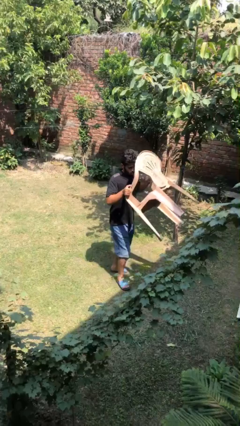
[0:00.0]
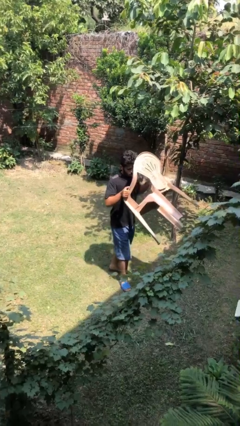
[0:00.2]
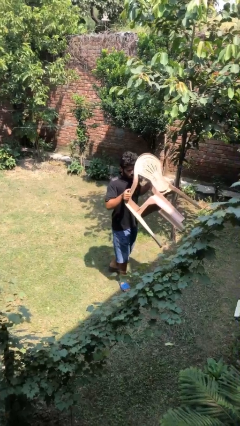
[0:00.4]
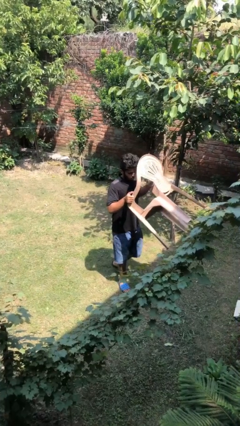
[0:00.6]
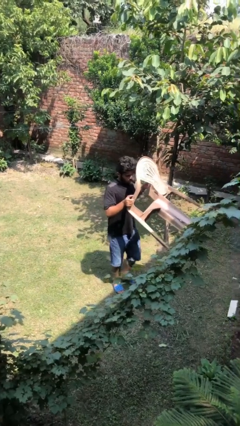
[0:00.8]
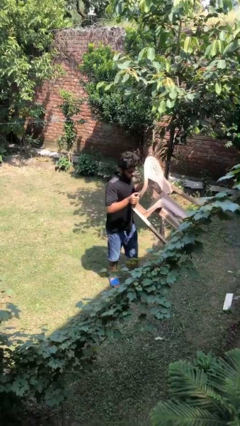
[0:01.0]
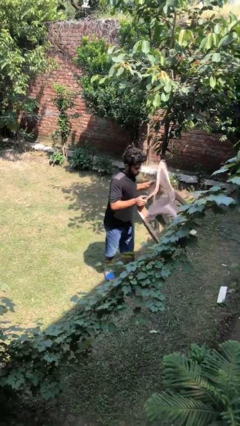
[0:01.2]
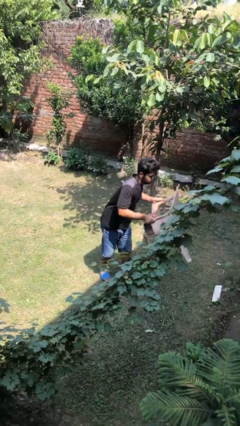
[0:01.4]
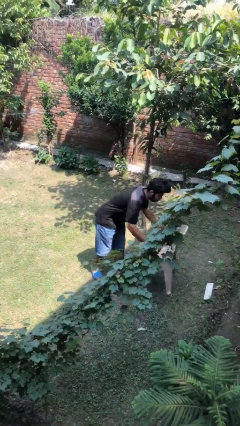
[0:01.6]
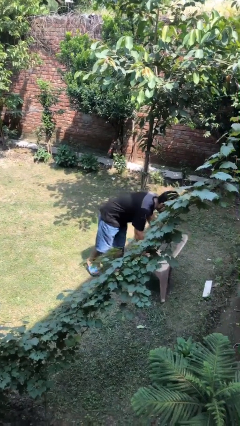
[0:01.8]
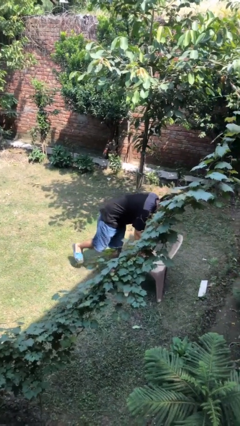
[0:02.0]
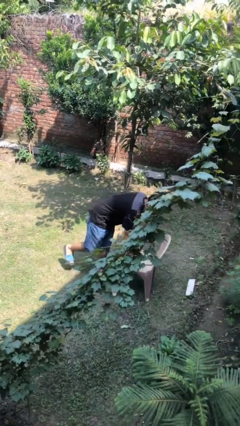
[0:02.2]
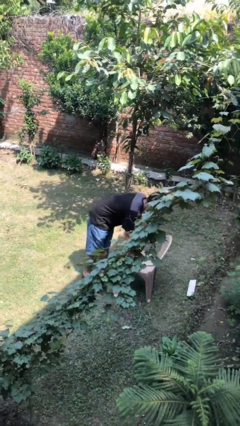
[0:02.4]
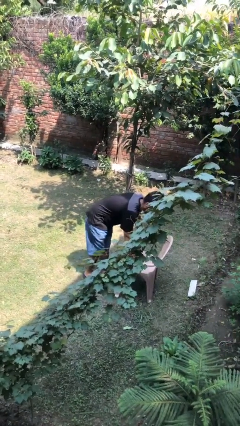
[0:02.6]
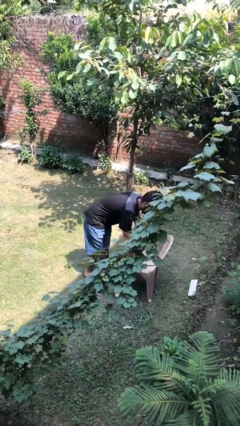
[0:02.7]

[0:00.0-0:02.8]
person puts down object on floor

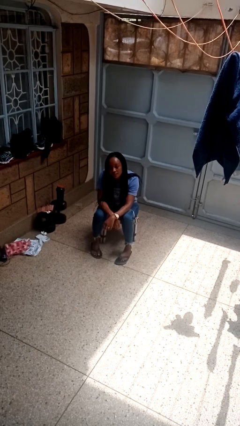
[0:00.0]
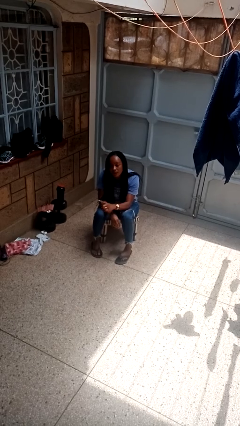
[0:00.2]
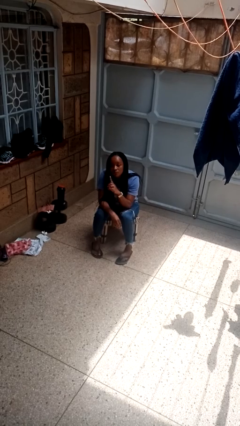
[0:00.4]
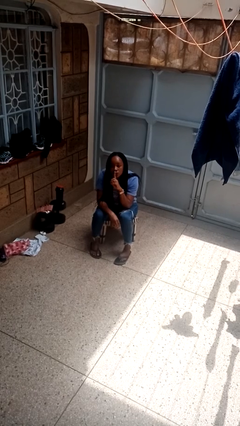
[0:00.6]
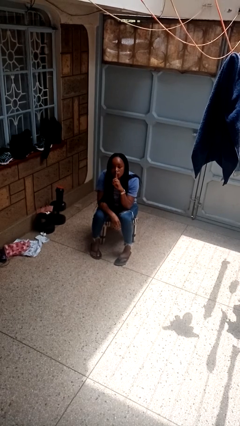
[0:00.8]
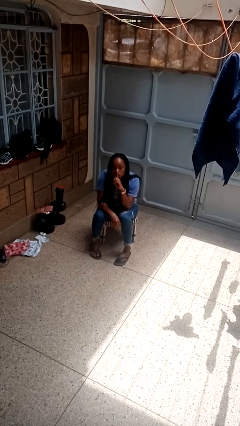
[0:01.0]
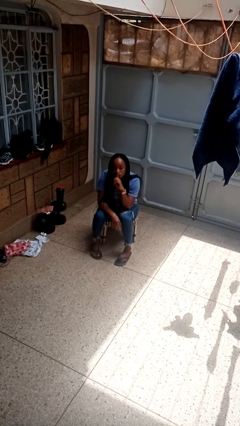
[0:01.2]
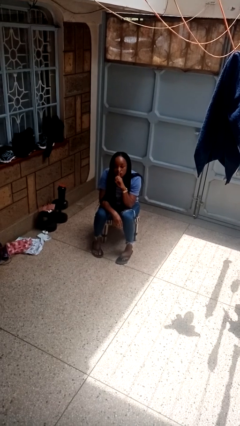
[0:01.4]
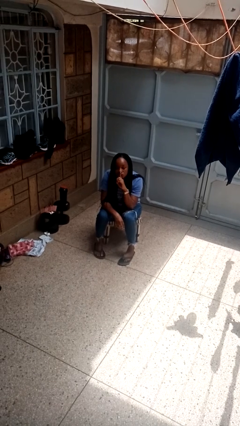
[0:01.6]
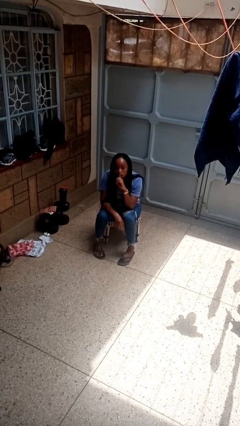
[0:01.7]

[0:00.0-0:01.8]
person gestures be quiet

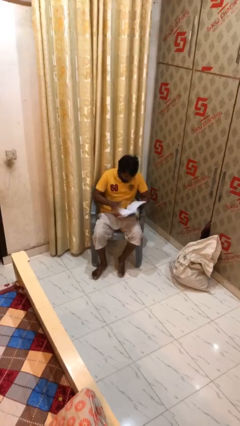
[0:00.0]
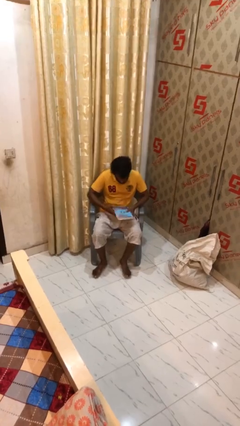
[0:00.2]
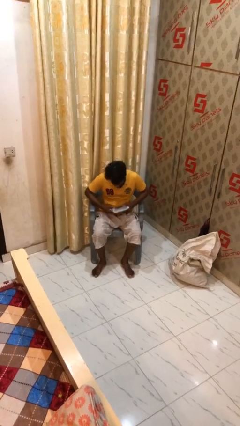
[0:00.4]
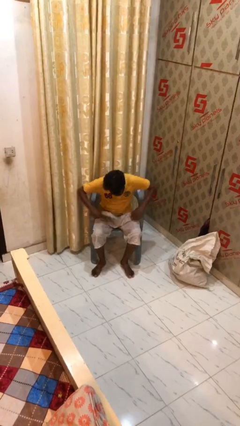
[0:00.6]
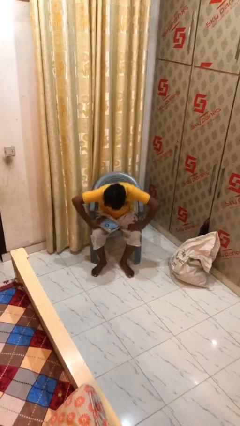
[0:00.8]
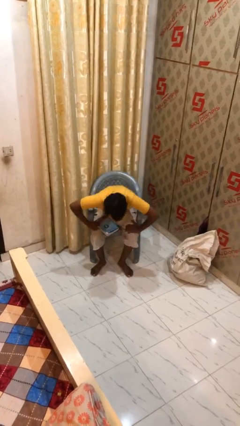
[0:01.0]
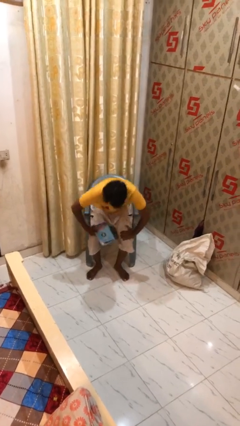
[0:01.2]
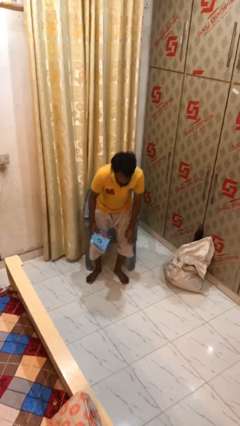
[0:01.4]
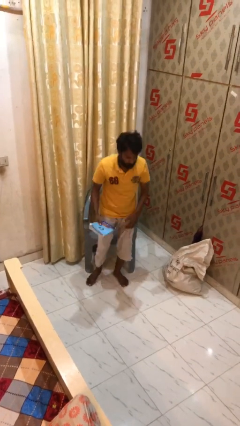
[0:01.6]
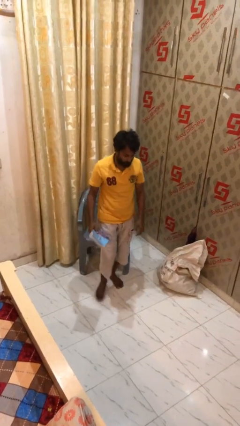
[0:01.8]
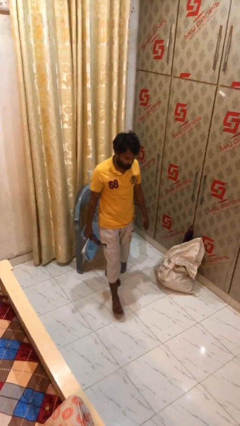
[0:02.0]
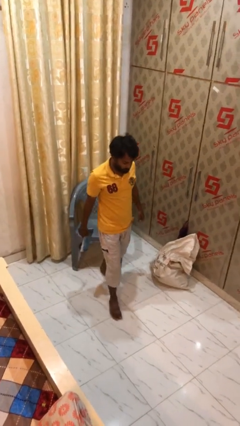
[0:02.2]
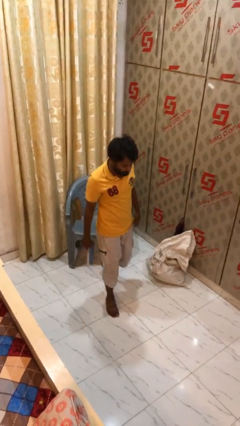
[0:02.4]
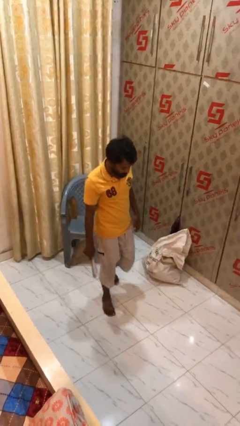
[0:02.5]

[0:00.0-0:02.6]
person stands up

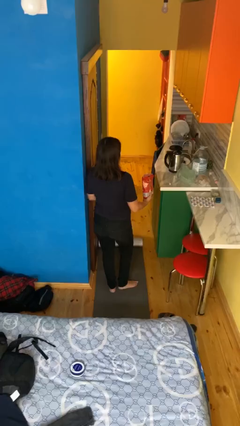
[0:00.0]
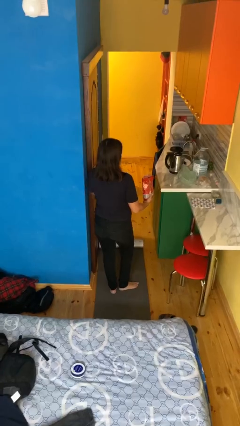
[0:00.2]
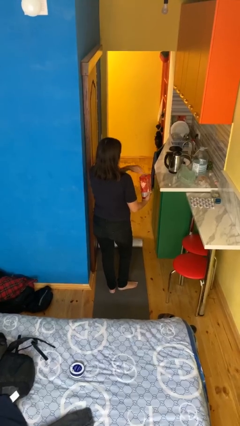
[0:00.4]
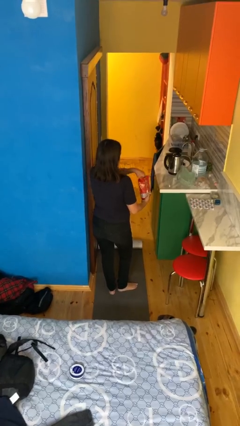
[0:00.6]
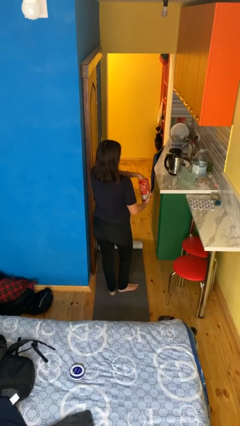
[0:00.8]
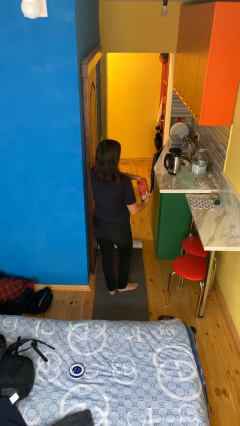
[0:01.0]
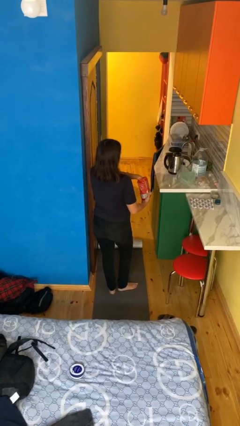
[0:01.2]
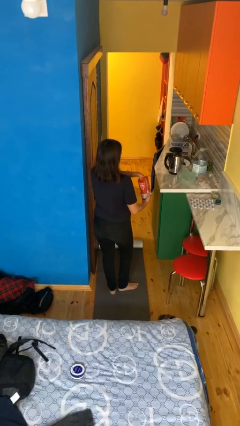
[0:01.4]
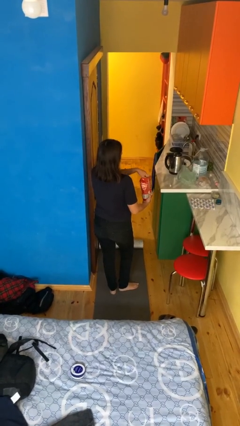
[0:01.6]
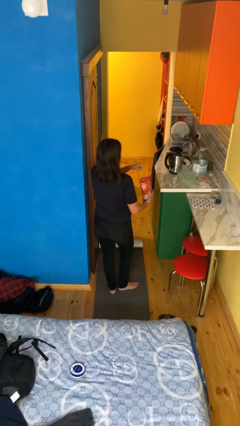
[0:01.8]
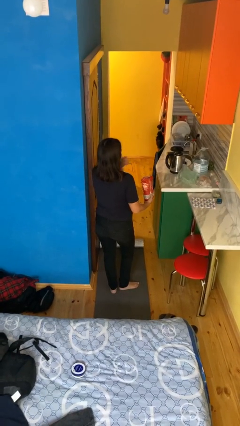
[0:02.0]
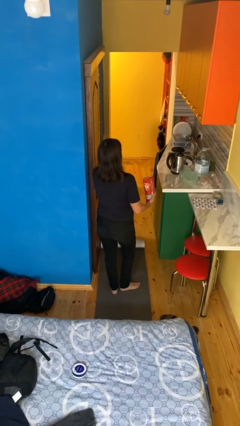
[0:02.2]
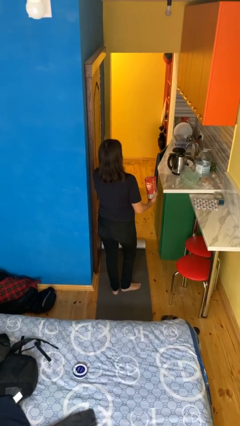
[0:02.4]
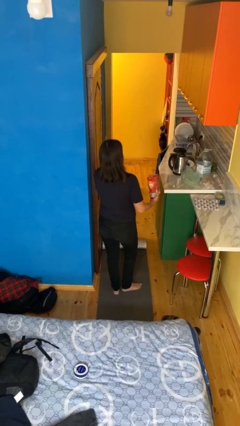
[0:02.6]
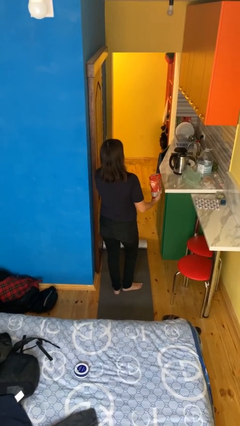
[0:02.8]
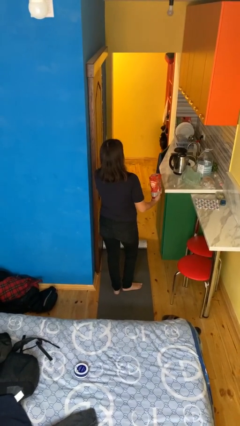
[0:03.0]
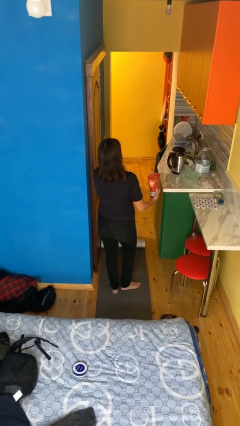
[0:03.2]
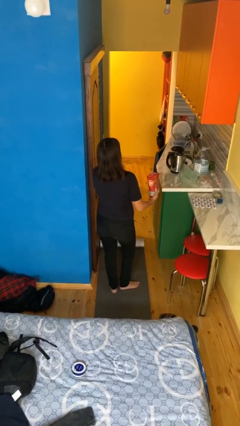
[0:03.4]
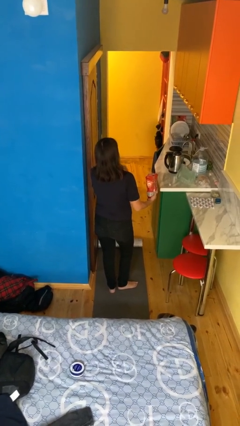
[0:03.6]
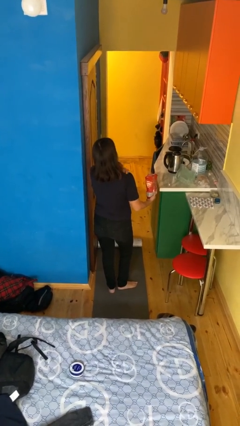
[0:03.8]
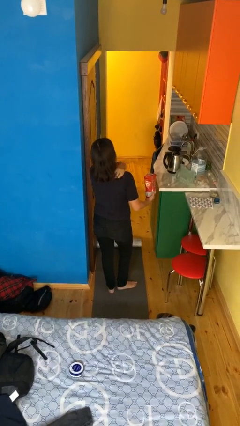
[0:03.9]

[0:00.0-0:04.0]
person eats snack from bag

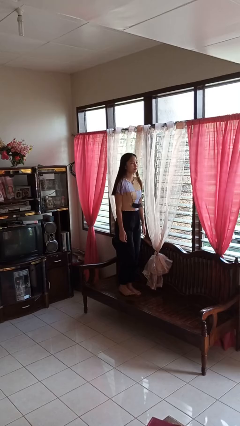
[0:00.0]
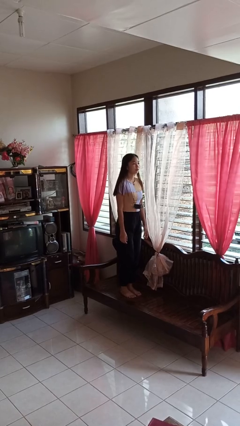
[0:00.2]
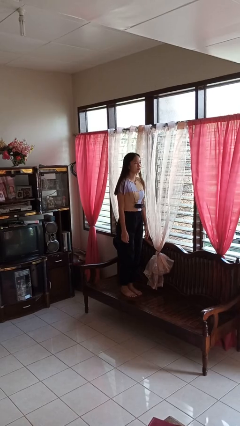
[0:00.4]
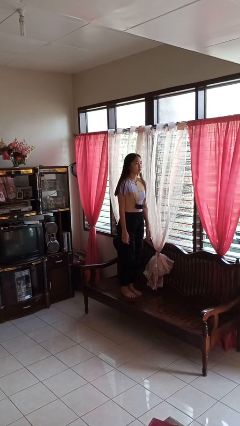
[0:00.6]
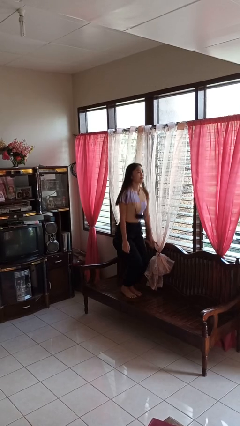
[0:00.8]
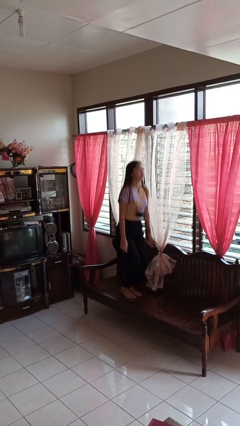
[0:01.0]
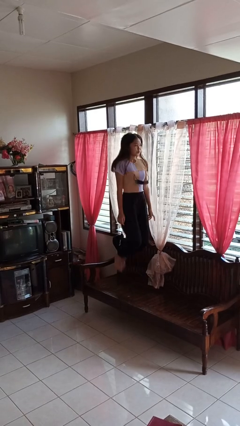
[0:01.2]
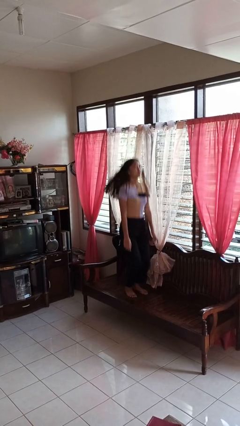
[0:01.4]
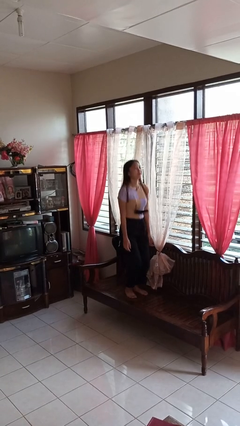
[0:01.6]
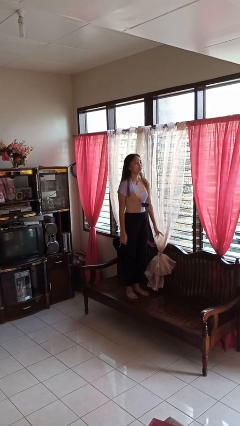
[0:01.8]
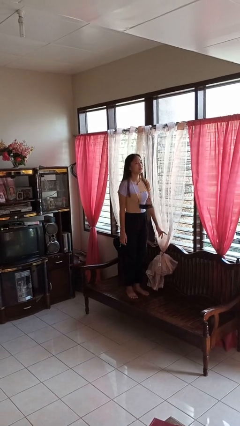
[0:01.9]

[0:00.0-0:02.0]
person jumps on couch

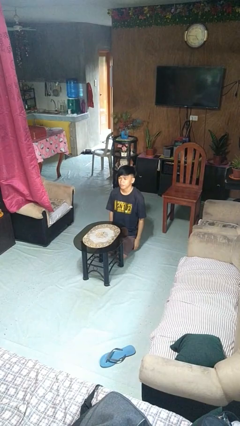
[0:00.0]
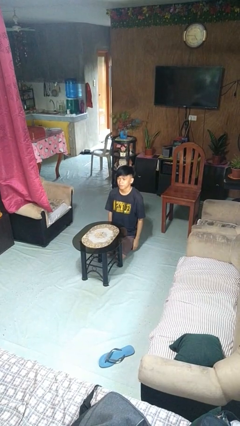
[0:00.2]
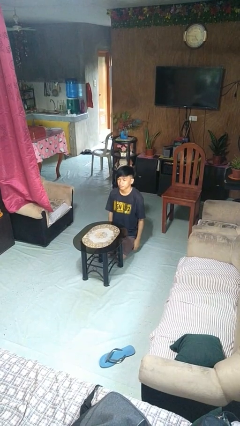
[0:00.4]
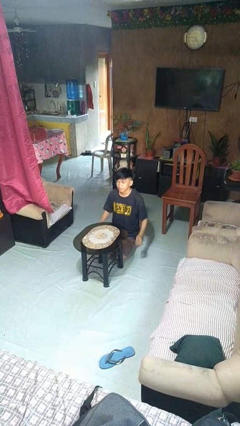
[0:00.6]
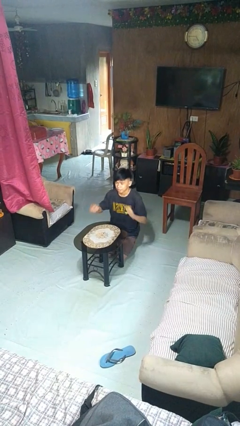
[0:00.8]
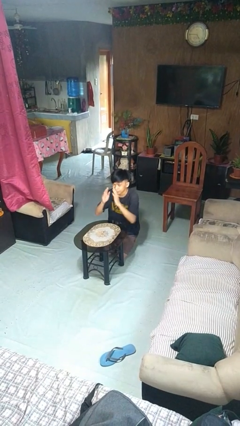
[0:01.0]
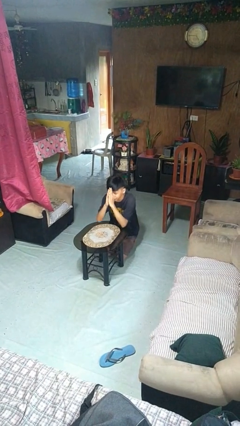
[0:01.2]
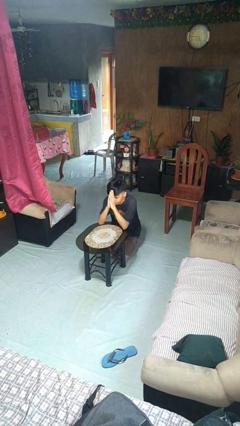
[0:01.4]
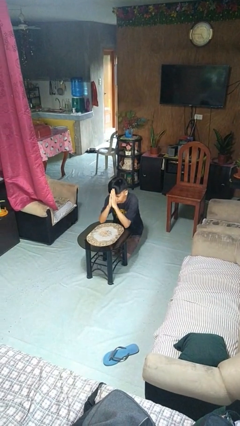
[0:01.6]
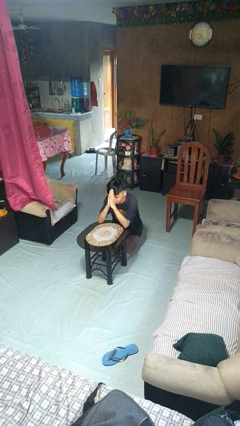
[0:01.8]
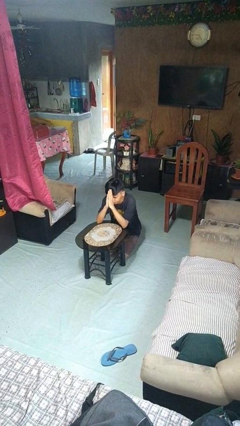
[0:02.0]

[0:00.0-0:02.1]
person prays

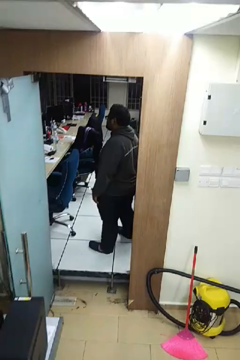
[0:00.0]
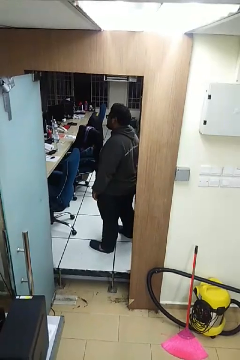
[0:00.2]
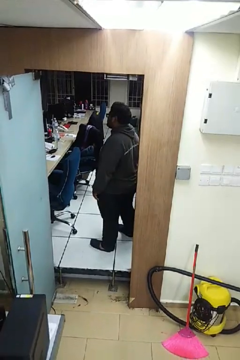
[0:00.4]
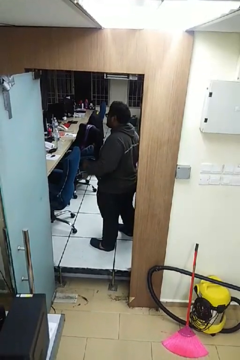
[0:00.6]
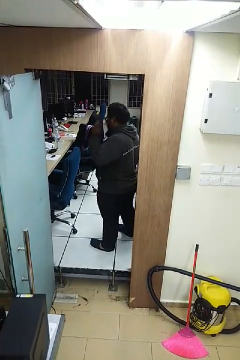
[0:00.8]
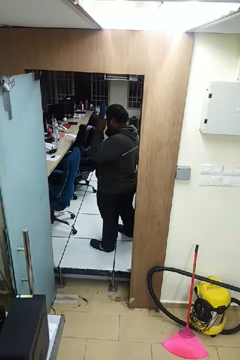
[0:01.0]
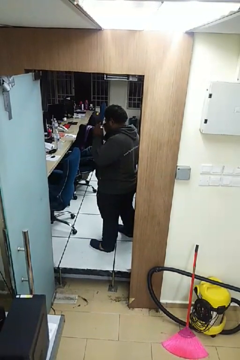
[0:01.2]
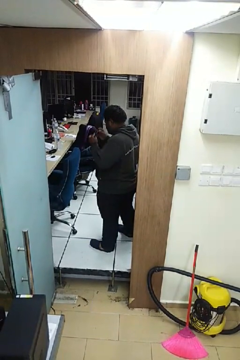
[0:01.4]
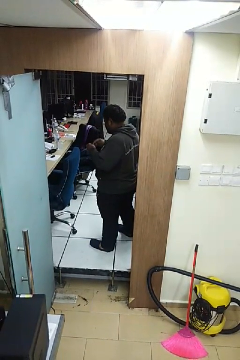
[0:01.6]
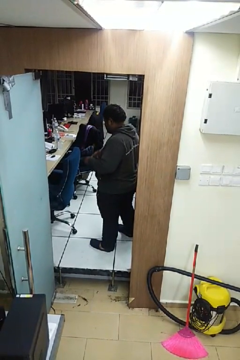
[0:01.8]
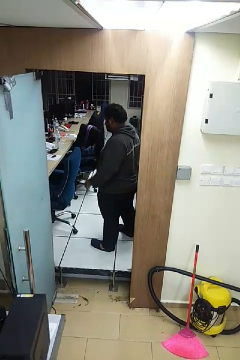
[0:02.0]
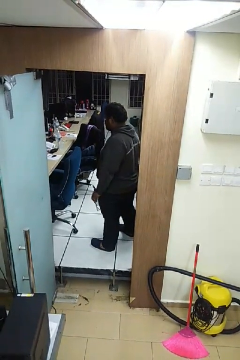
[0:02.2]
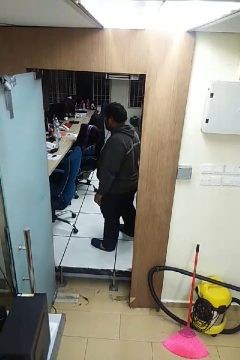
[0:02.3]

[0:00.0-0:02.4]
person takes off glasses

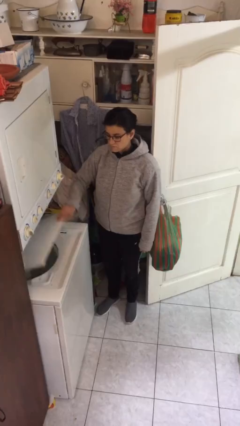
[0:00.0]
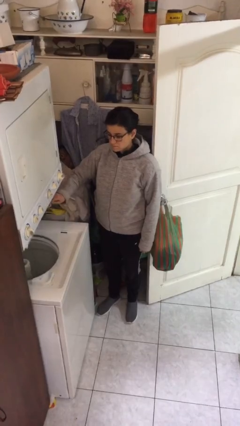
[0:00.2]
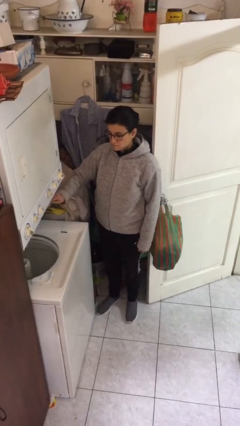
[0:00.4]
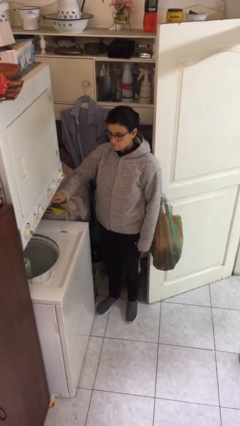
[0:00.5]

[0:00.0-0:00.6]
person opens clothes washer
